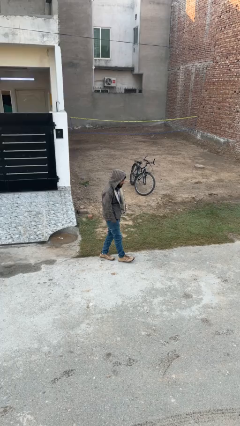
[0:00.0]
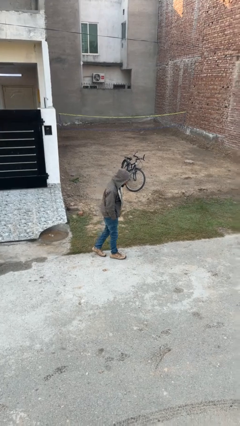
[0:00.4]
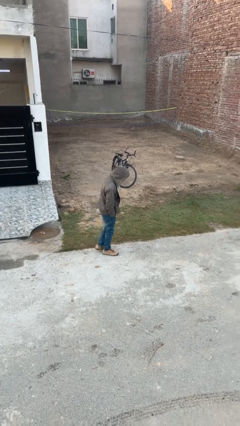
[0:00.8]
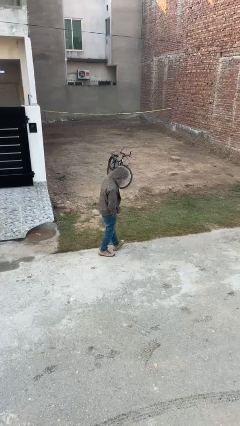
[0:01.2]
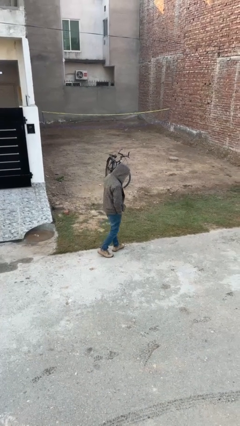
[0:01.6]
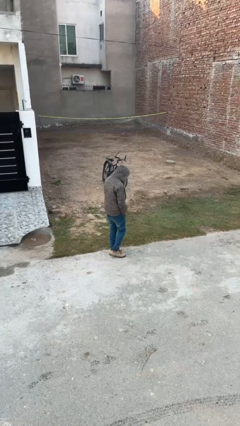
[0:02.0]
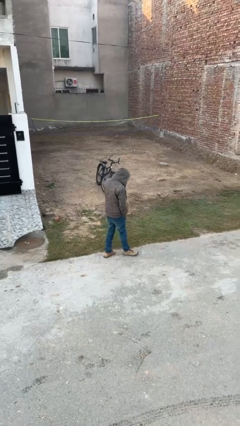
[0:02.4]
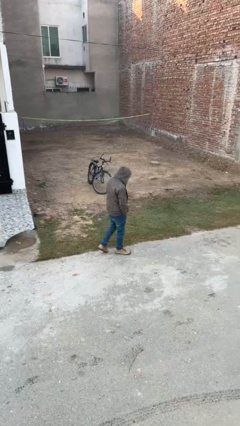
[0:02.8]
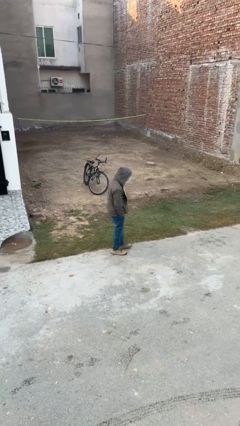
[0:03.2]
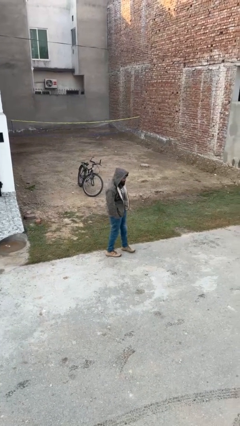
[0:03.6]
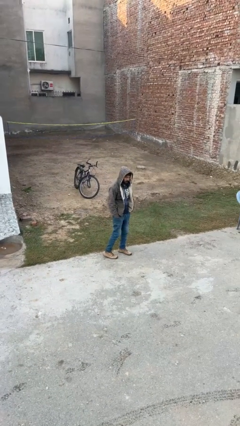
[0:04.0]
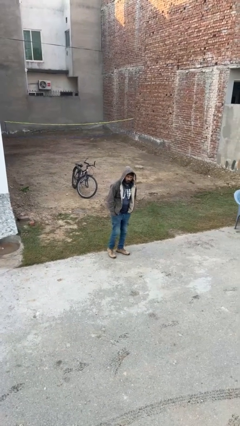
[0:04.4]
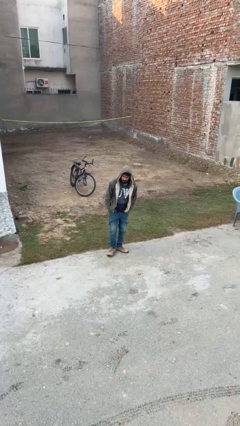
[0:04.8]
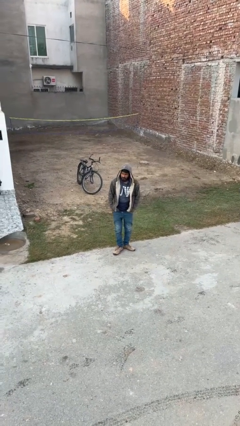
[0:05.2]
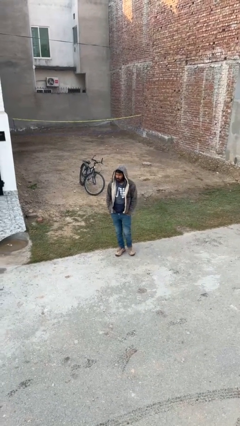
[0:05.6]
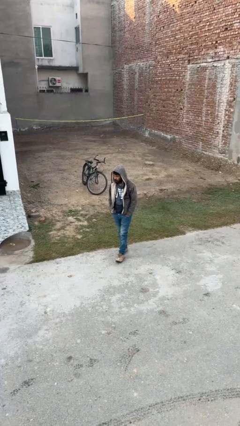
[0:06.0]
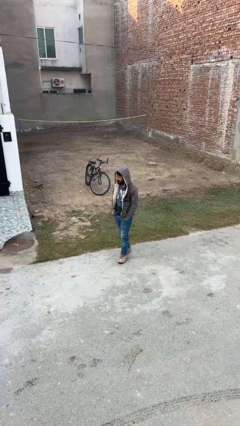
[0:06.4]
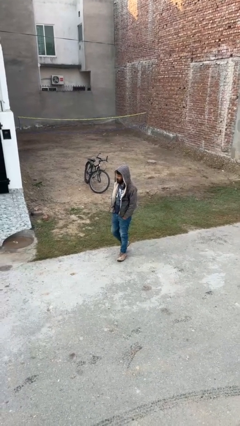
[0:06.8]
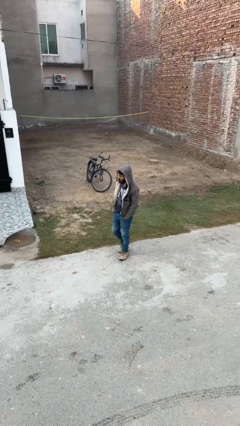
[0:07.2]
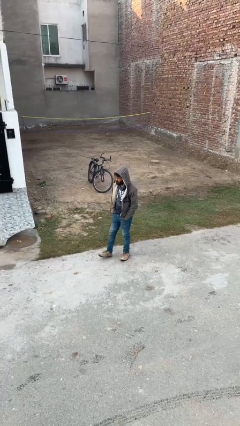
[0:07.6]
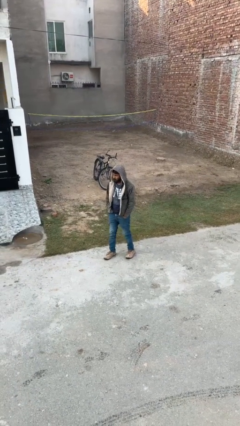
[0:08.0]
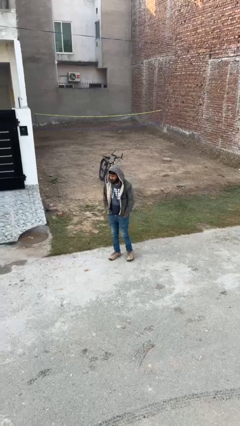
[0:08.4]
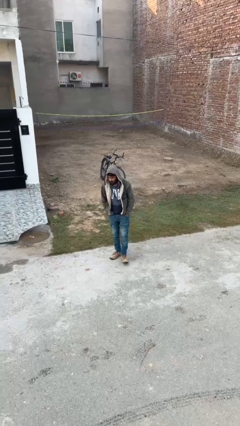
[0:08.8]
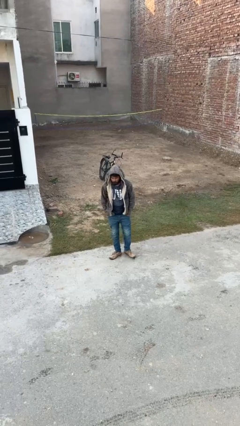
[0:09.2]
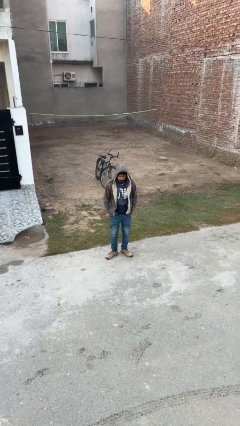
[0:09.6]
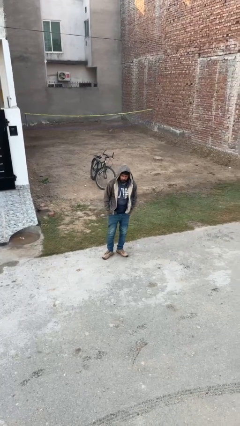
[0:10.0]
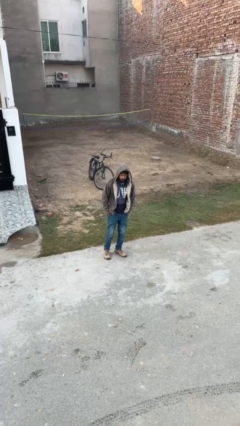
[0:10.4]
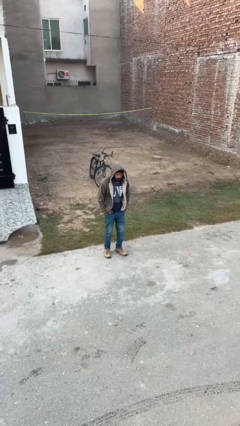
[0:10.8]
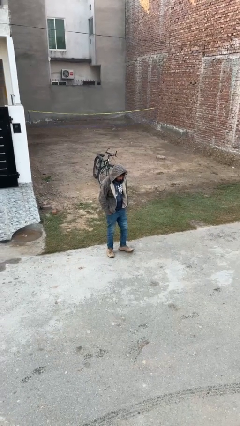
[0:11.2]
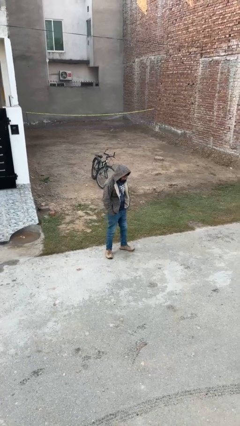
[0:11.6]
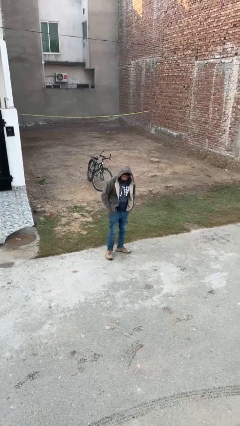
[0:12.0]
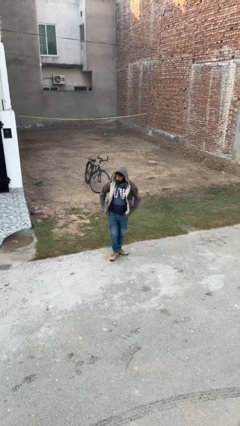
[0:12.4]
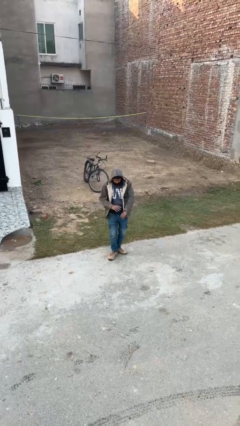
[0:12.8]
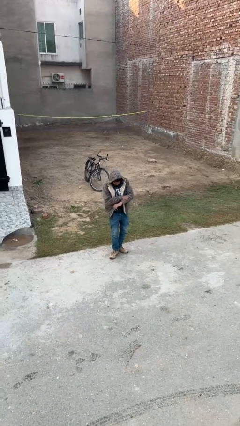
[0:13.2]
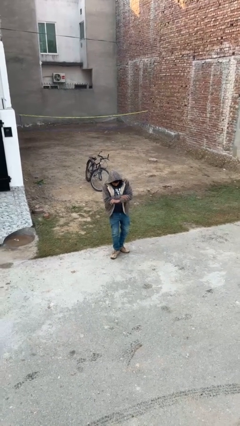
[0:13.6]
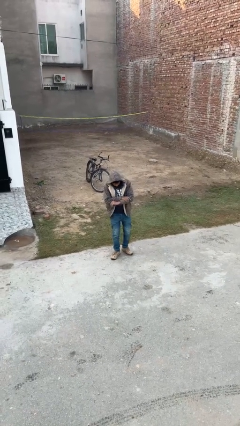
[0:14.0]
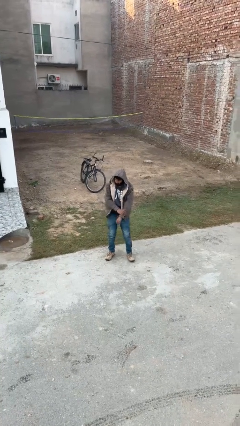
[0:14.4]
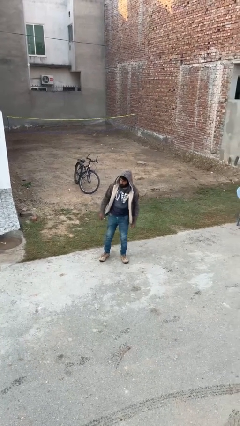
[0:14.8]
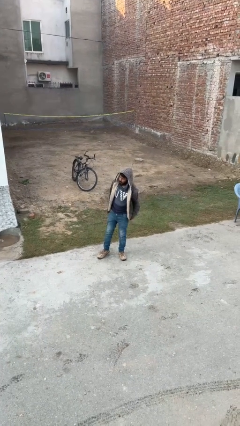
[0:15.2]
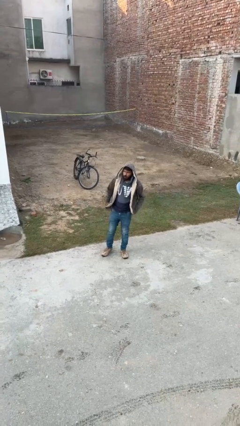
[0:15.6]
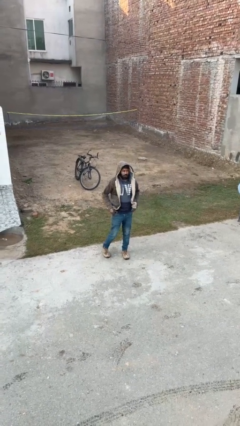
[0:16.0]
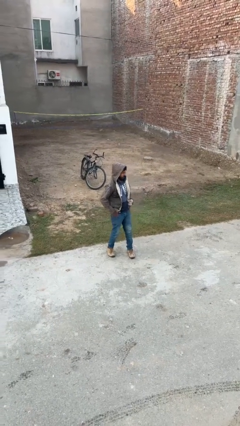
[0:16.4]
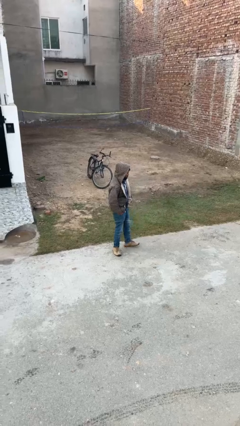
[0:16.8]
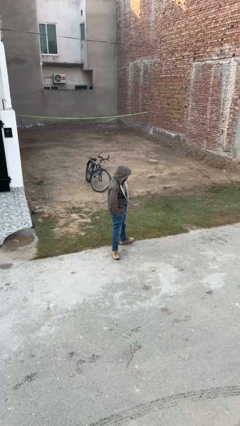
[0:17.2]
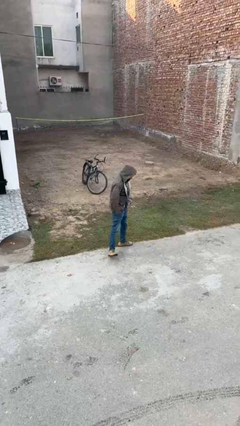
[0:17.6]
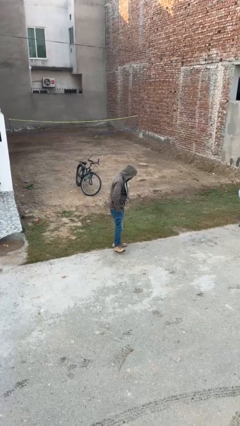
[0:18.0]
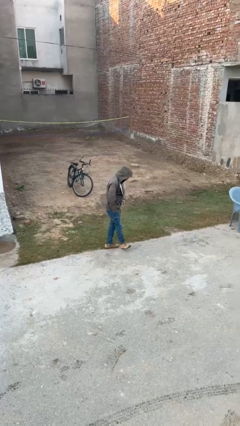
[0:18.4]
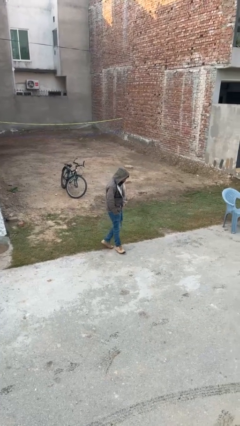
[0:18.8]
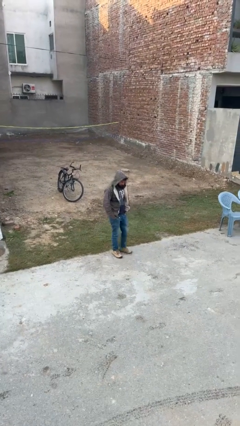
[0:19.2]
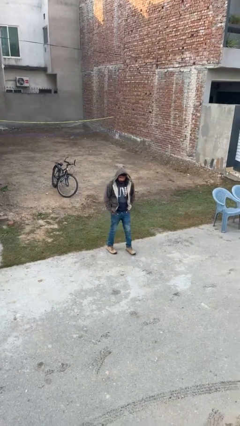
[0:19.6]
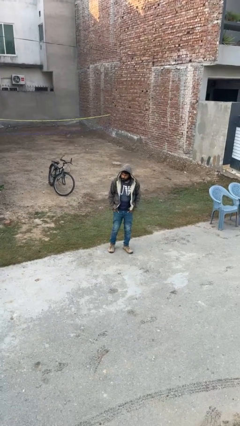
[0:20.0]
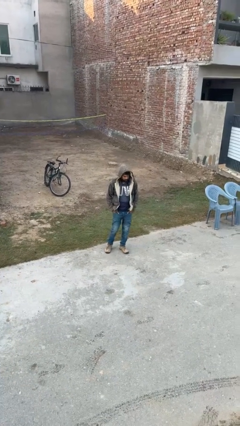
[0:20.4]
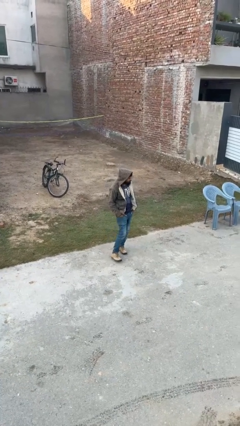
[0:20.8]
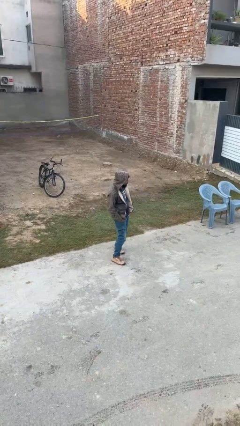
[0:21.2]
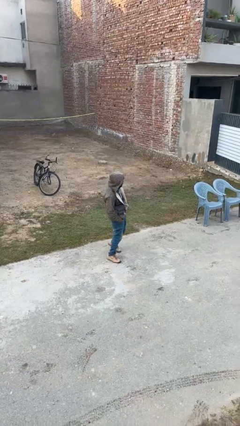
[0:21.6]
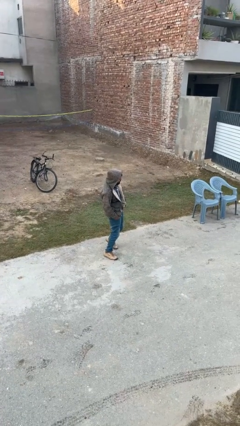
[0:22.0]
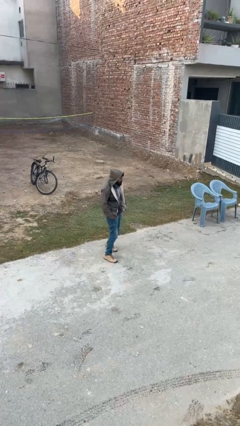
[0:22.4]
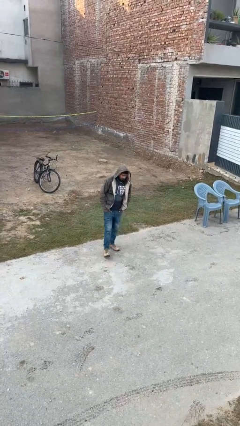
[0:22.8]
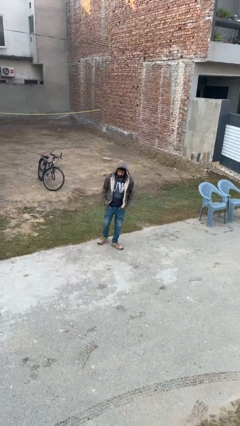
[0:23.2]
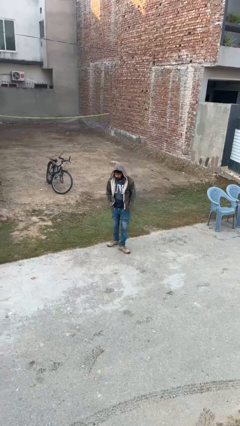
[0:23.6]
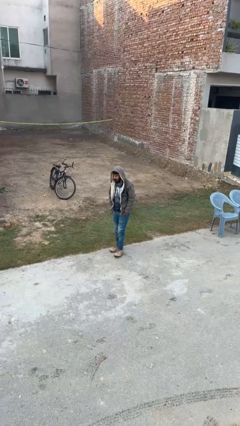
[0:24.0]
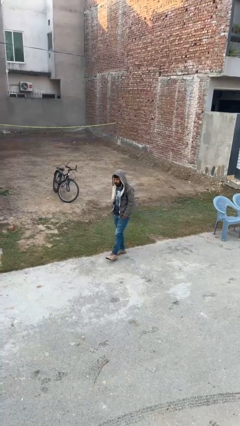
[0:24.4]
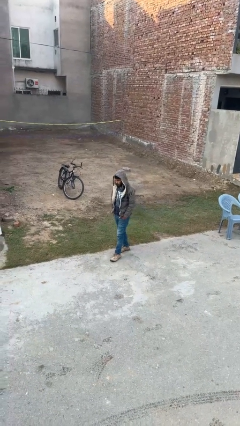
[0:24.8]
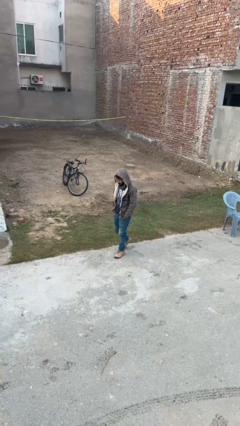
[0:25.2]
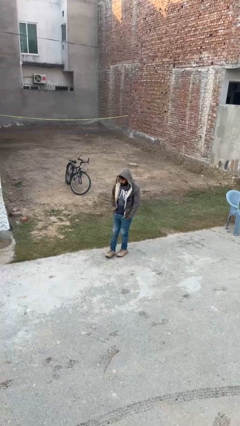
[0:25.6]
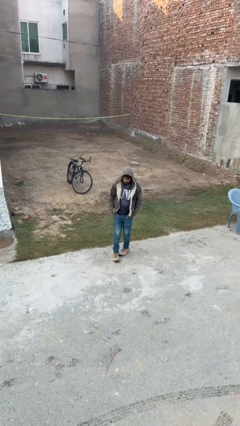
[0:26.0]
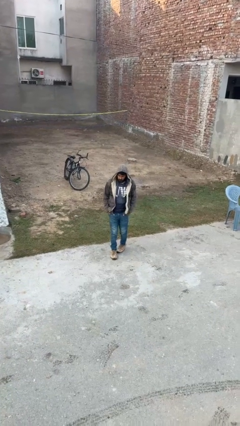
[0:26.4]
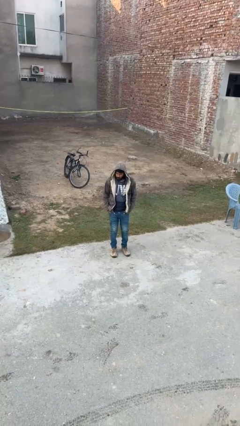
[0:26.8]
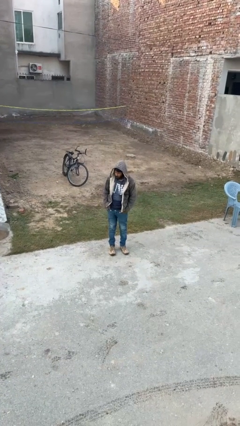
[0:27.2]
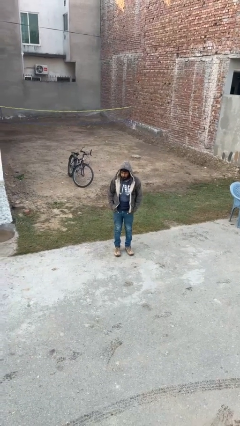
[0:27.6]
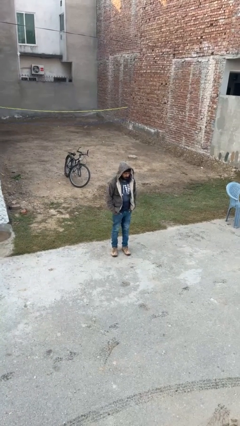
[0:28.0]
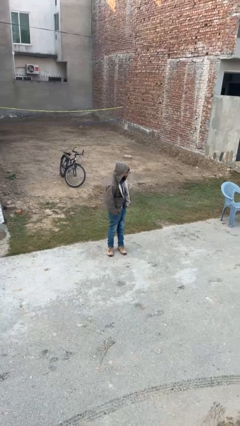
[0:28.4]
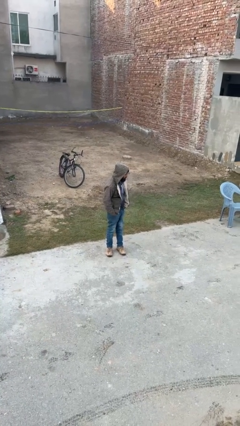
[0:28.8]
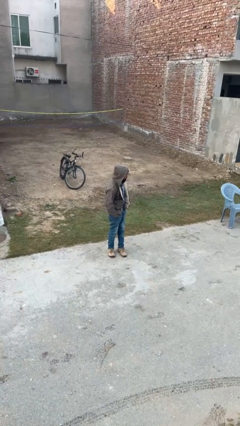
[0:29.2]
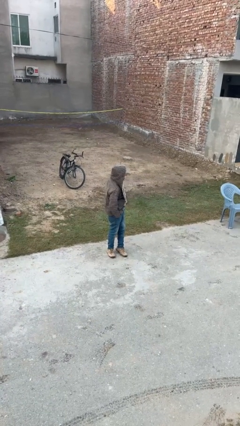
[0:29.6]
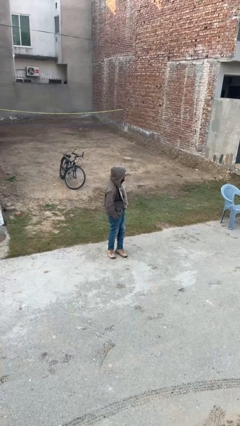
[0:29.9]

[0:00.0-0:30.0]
person walks

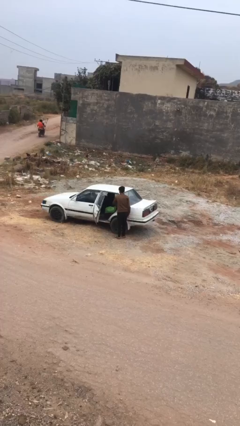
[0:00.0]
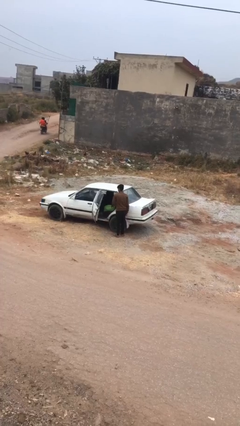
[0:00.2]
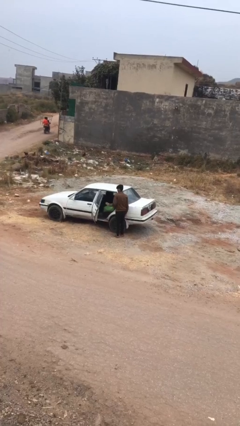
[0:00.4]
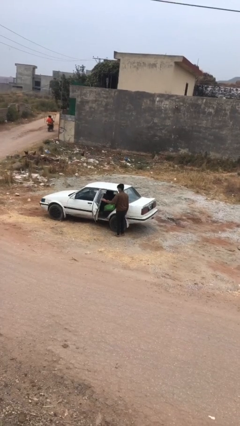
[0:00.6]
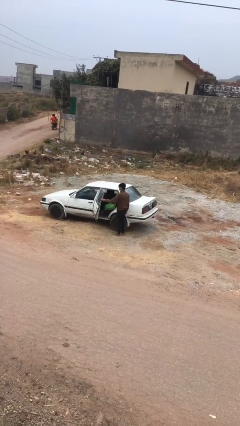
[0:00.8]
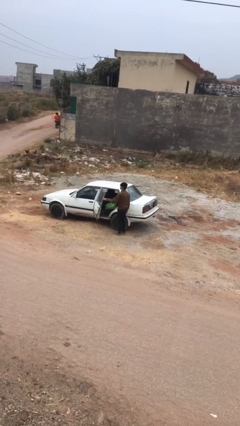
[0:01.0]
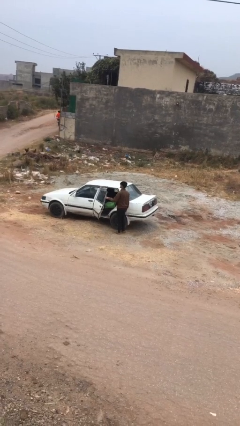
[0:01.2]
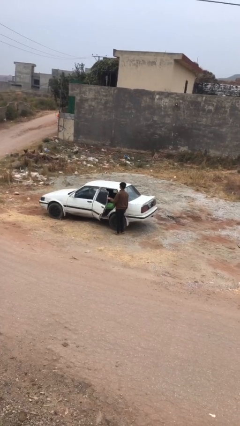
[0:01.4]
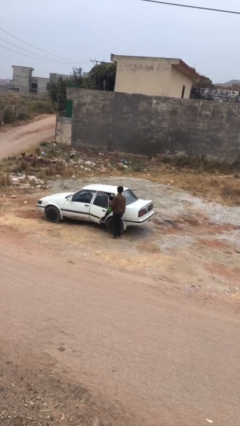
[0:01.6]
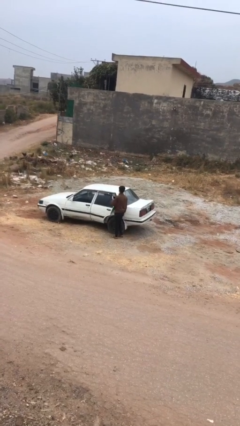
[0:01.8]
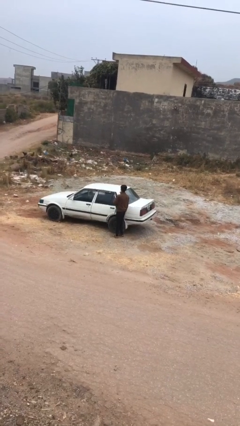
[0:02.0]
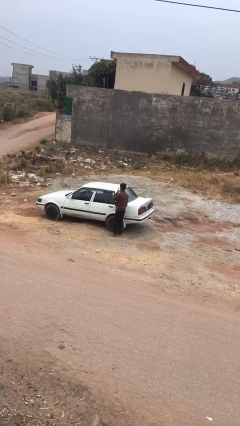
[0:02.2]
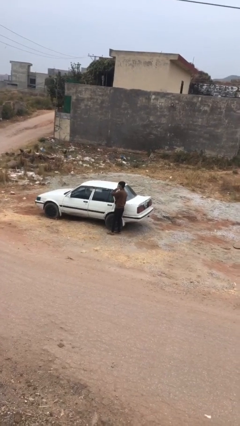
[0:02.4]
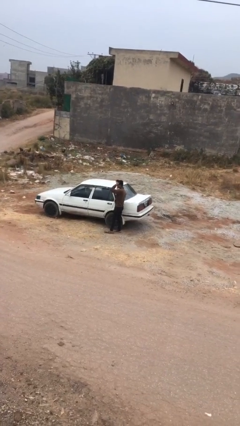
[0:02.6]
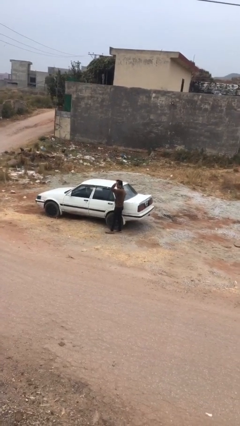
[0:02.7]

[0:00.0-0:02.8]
person closes car door

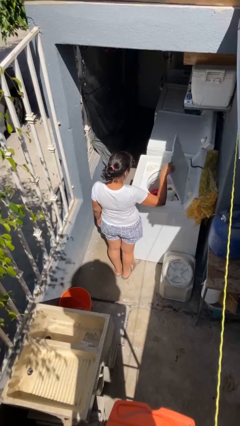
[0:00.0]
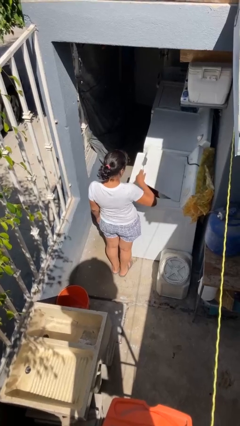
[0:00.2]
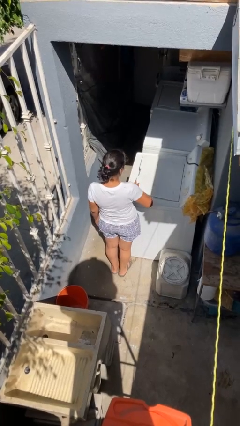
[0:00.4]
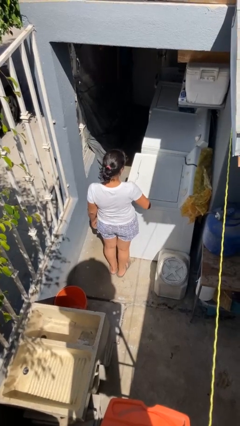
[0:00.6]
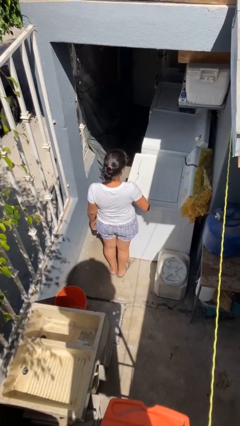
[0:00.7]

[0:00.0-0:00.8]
person closes clothes washer
